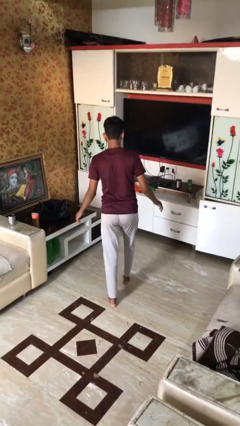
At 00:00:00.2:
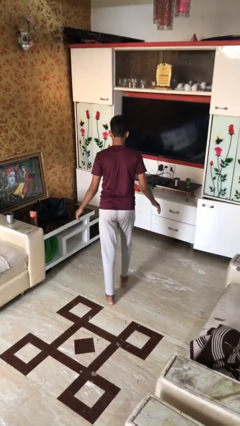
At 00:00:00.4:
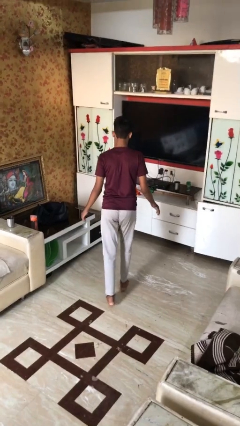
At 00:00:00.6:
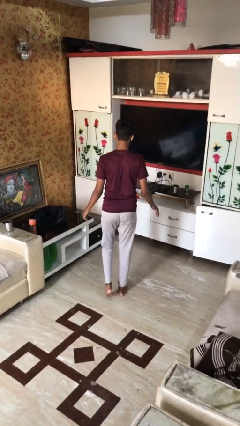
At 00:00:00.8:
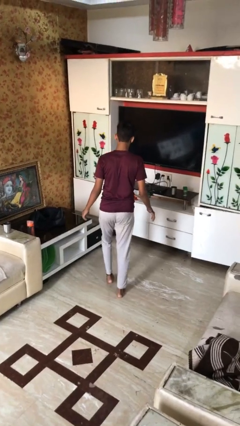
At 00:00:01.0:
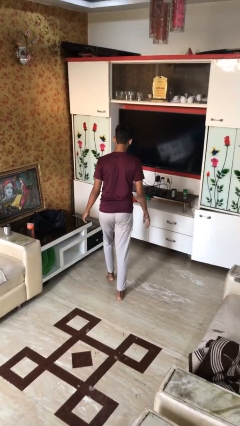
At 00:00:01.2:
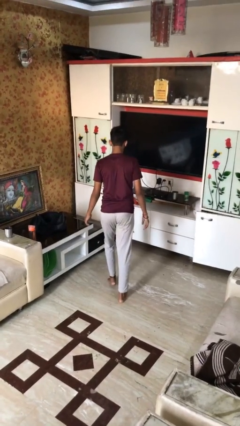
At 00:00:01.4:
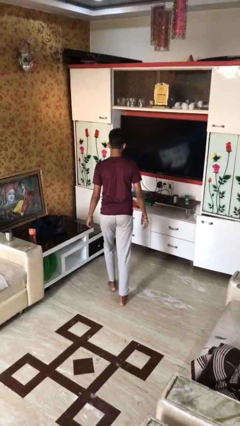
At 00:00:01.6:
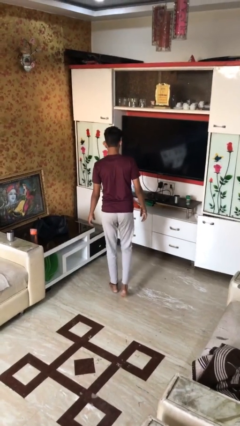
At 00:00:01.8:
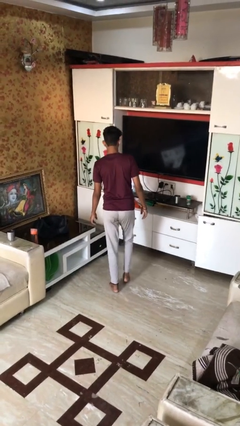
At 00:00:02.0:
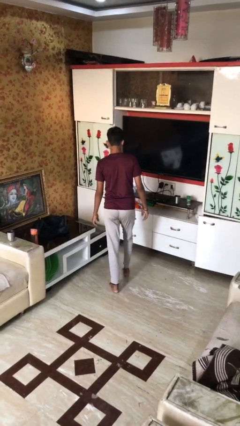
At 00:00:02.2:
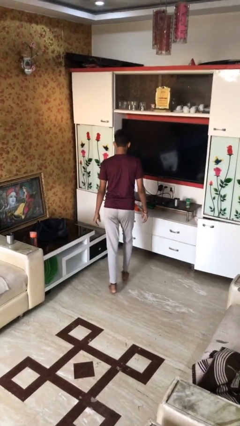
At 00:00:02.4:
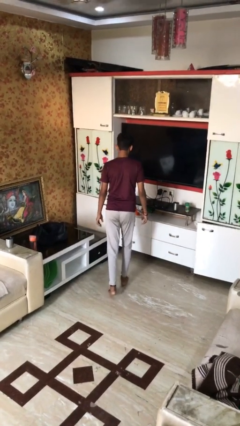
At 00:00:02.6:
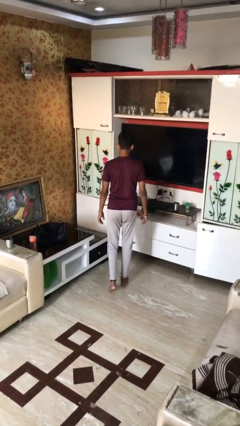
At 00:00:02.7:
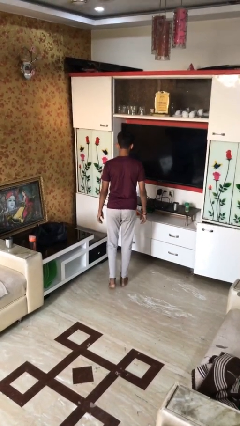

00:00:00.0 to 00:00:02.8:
person walks tiptoe

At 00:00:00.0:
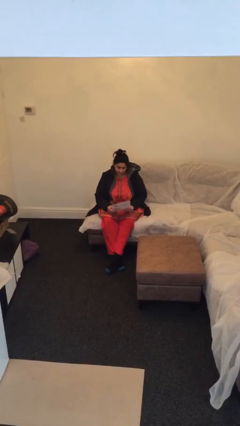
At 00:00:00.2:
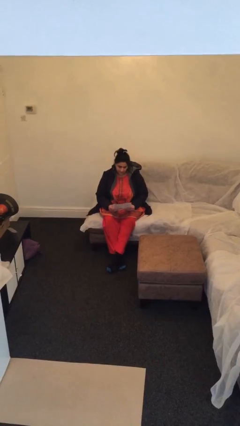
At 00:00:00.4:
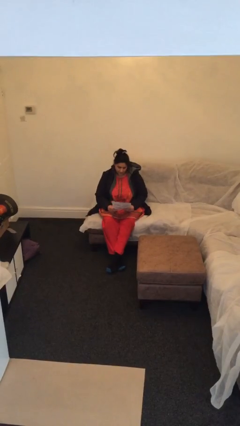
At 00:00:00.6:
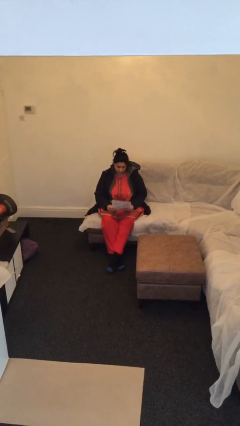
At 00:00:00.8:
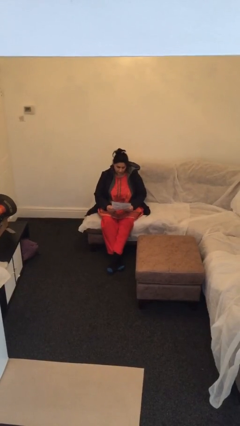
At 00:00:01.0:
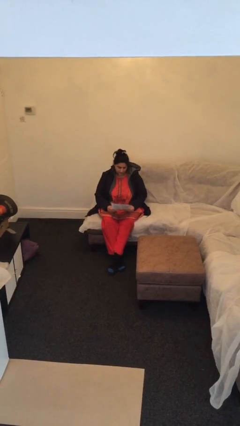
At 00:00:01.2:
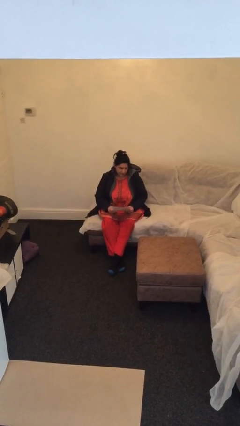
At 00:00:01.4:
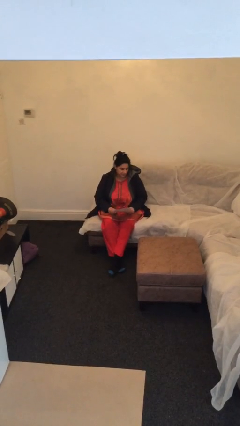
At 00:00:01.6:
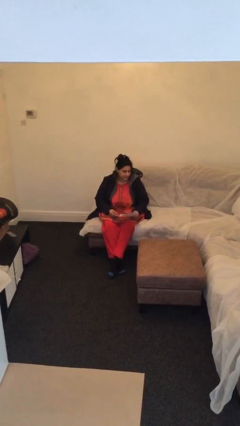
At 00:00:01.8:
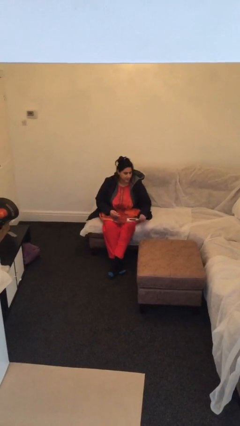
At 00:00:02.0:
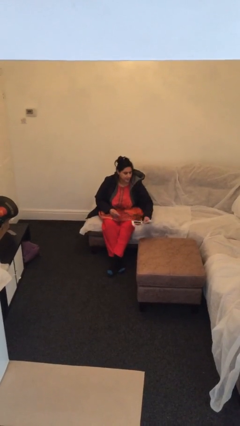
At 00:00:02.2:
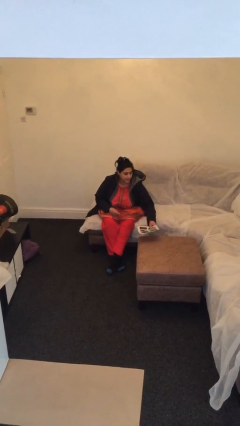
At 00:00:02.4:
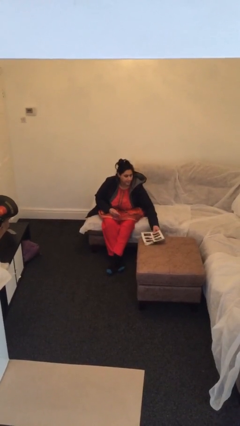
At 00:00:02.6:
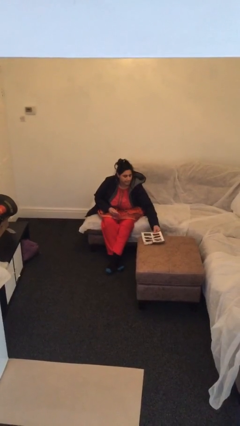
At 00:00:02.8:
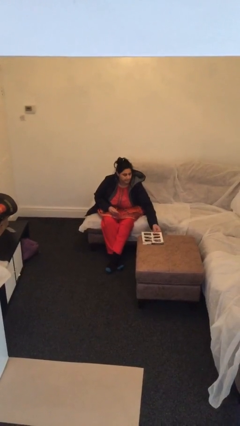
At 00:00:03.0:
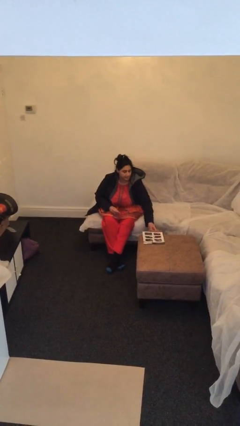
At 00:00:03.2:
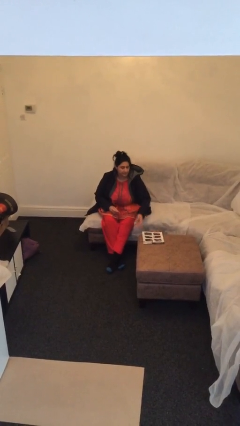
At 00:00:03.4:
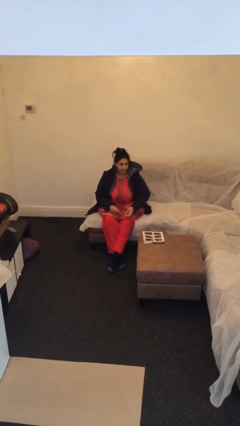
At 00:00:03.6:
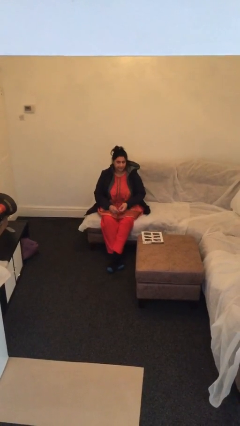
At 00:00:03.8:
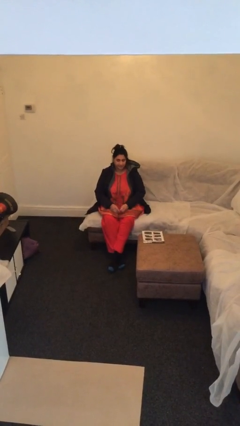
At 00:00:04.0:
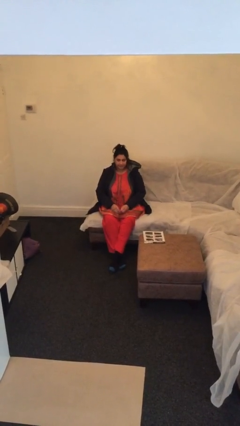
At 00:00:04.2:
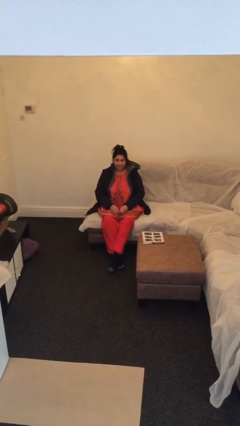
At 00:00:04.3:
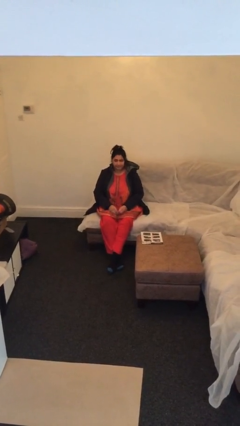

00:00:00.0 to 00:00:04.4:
person puts down object on table

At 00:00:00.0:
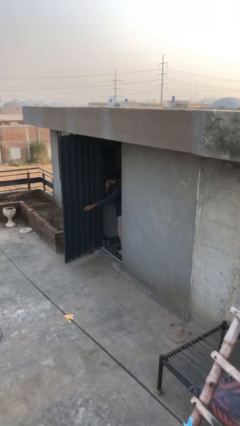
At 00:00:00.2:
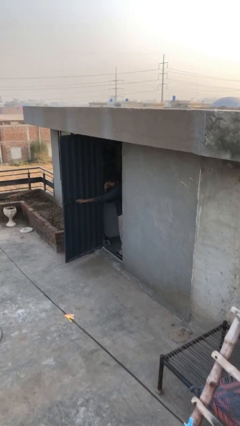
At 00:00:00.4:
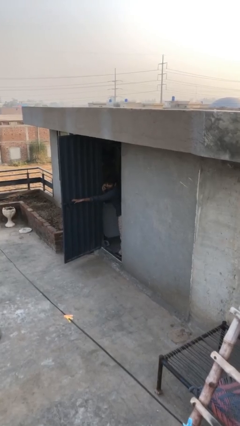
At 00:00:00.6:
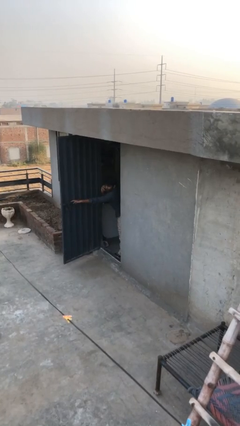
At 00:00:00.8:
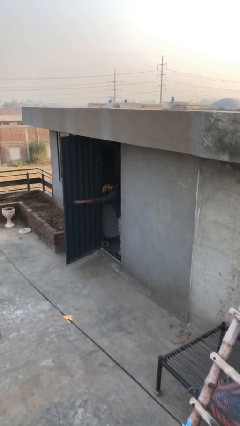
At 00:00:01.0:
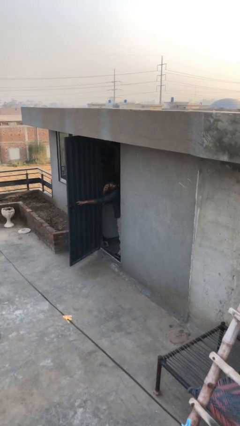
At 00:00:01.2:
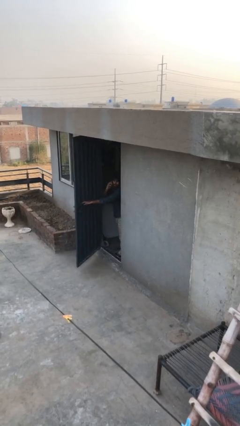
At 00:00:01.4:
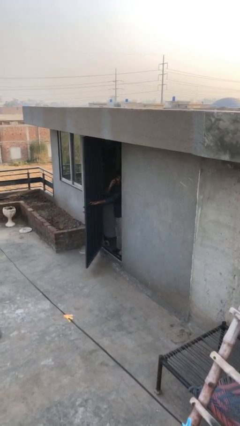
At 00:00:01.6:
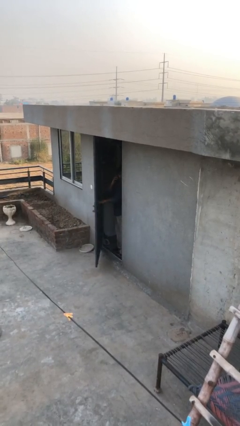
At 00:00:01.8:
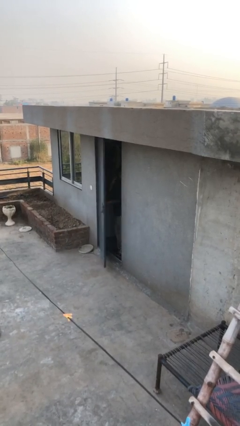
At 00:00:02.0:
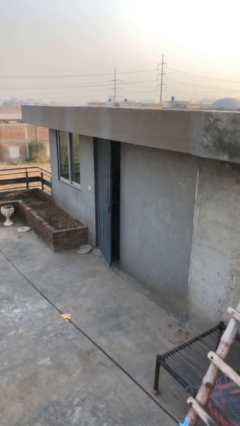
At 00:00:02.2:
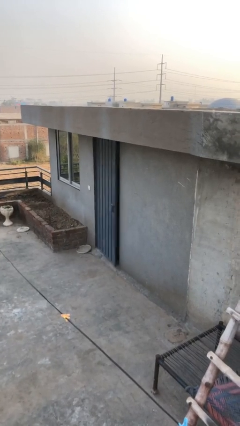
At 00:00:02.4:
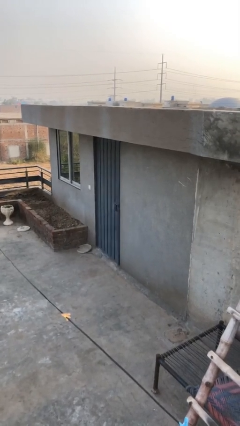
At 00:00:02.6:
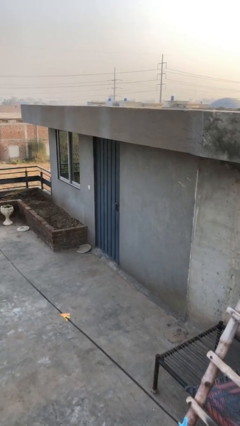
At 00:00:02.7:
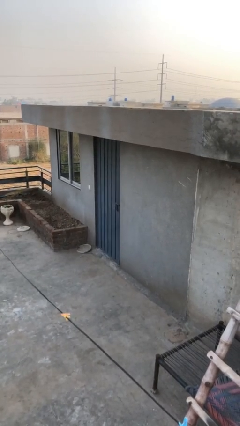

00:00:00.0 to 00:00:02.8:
person closes facility door

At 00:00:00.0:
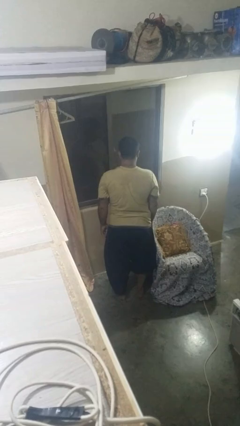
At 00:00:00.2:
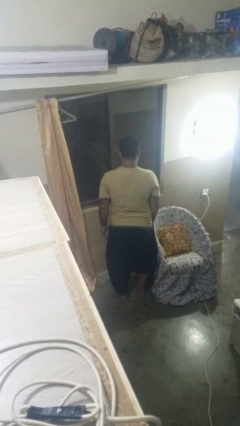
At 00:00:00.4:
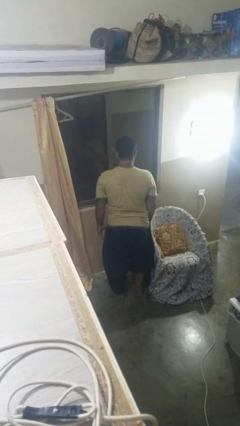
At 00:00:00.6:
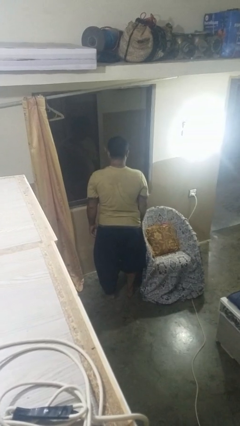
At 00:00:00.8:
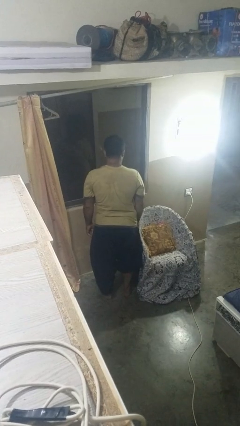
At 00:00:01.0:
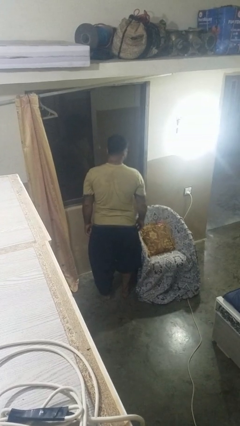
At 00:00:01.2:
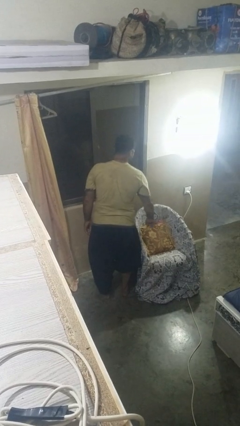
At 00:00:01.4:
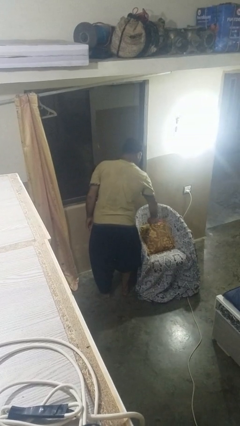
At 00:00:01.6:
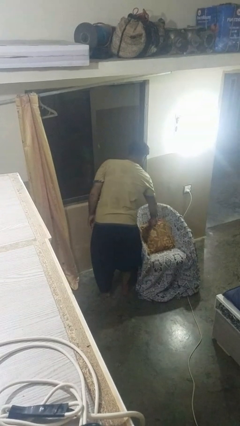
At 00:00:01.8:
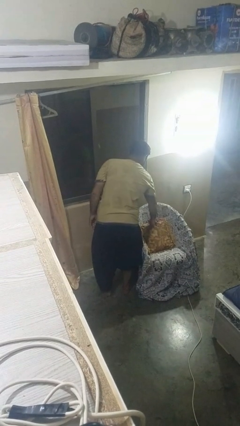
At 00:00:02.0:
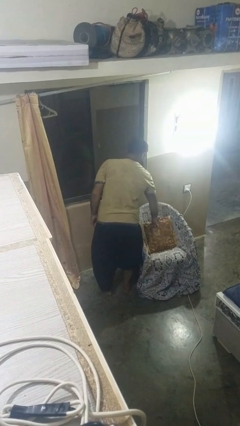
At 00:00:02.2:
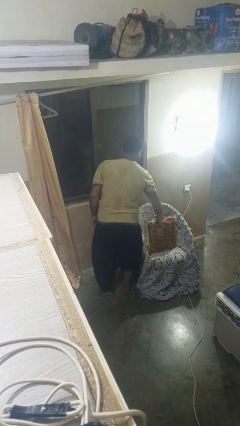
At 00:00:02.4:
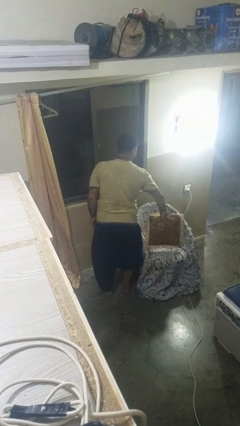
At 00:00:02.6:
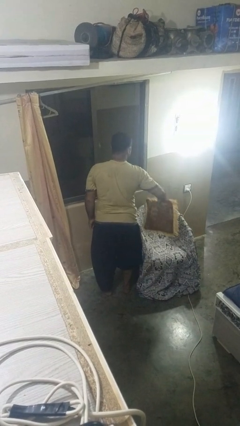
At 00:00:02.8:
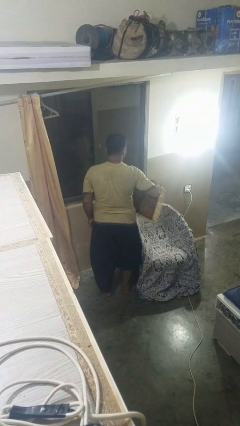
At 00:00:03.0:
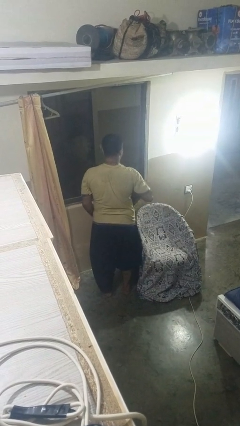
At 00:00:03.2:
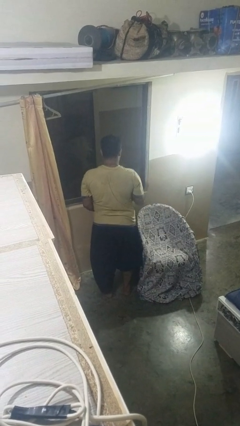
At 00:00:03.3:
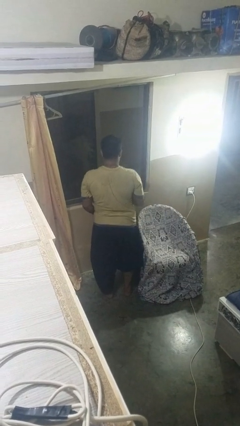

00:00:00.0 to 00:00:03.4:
person picks up object from couch

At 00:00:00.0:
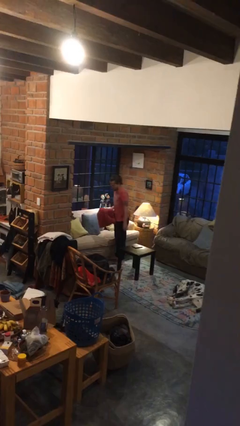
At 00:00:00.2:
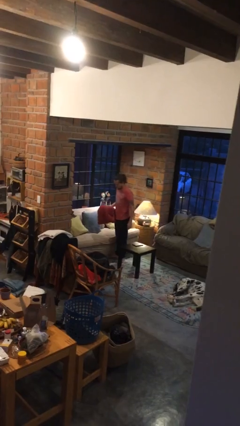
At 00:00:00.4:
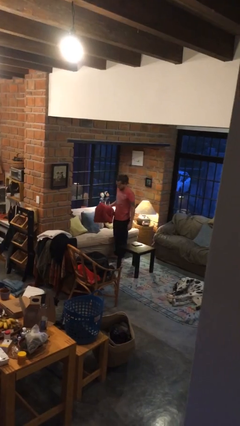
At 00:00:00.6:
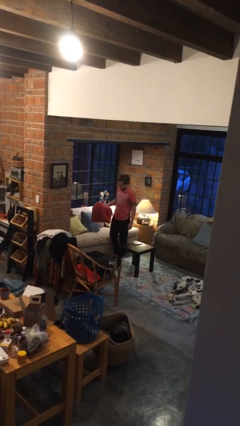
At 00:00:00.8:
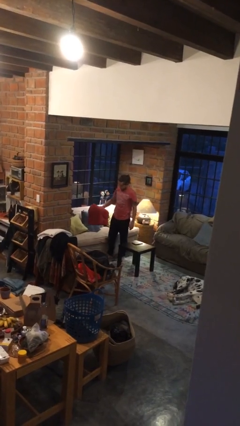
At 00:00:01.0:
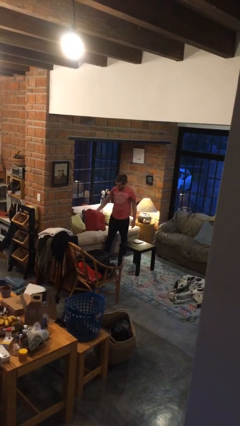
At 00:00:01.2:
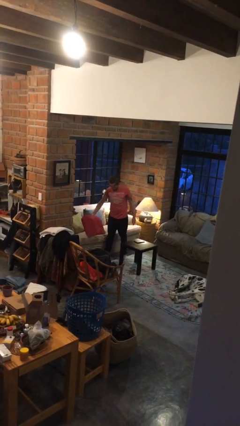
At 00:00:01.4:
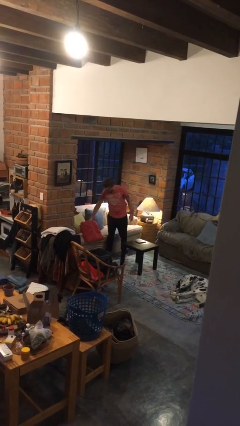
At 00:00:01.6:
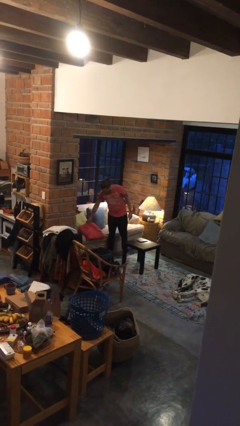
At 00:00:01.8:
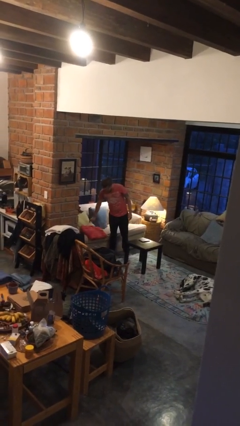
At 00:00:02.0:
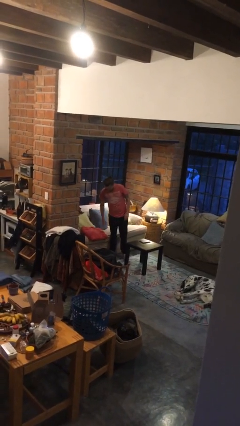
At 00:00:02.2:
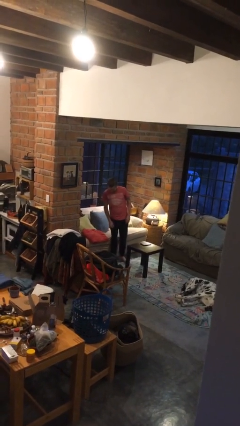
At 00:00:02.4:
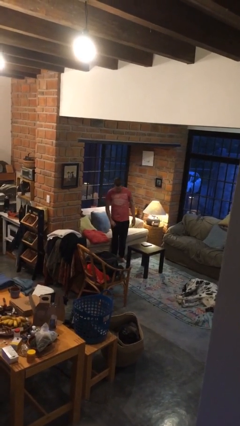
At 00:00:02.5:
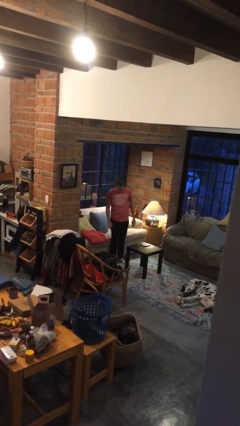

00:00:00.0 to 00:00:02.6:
person puts down object on couch

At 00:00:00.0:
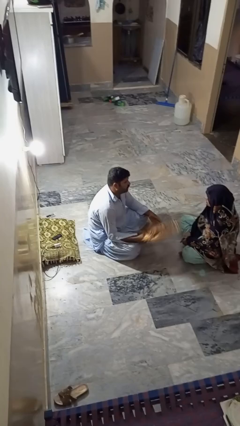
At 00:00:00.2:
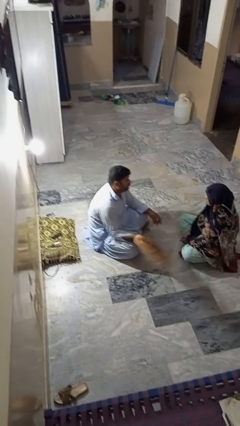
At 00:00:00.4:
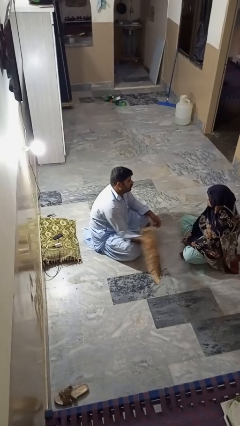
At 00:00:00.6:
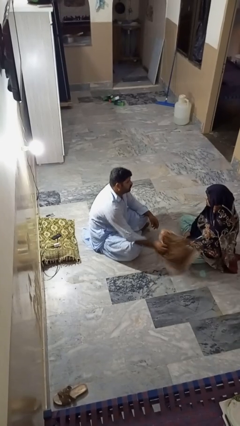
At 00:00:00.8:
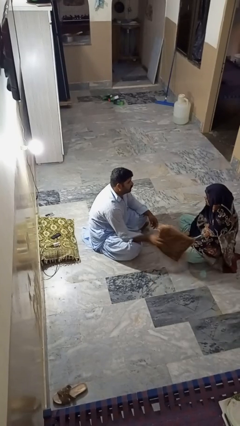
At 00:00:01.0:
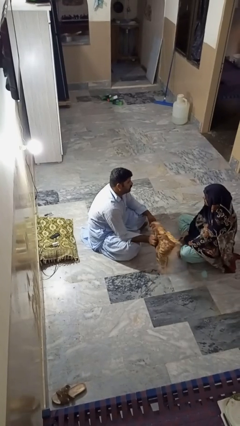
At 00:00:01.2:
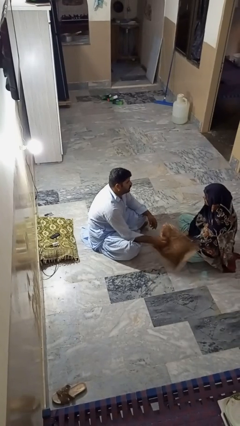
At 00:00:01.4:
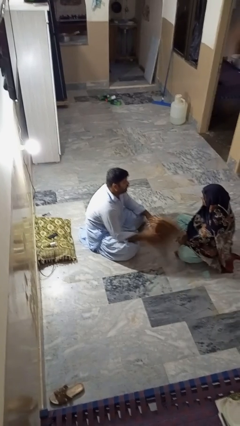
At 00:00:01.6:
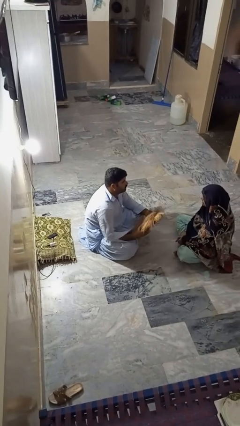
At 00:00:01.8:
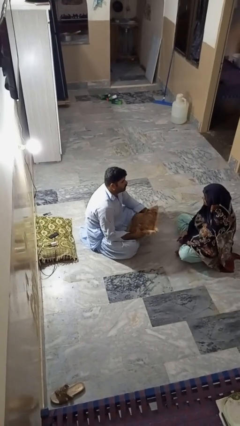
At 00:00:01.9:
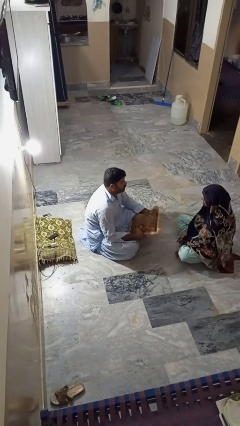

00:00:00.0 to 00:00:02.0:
person hits person with pillow
